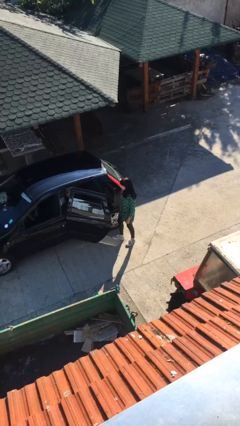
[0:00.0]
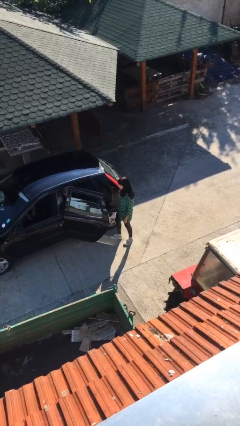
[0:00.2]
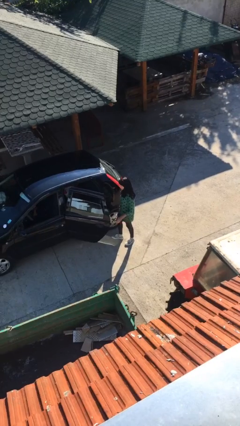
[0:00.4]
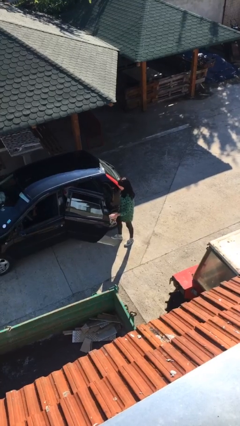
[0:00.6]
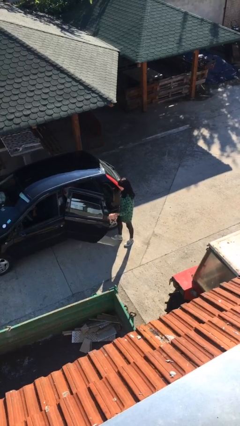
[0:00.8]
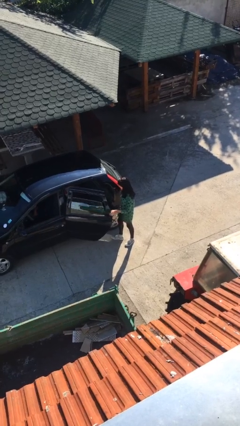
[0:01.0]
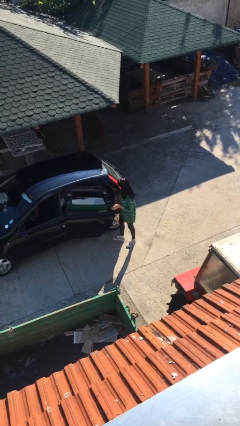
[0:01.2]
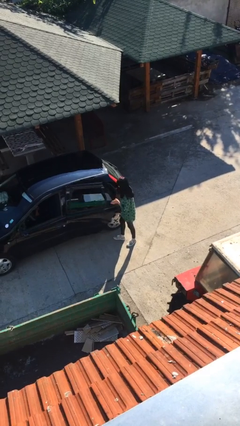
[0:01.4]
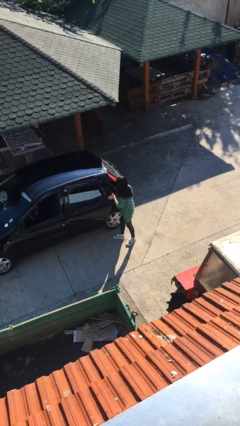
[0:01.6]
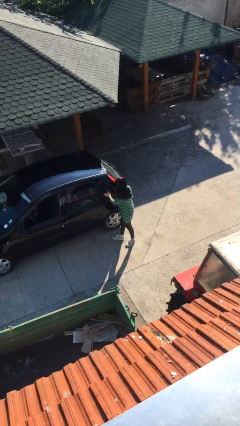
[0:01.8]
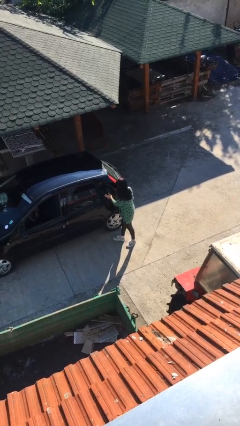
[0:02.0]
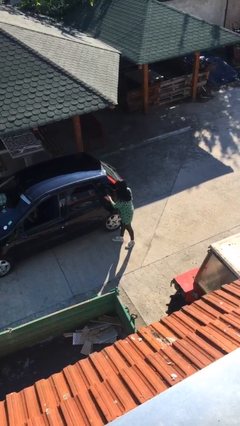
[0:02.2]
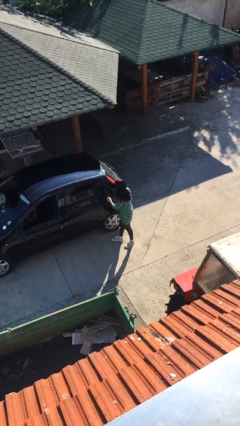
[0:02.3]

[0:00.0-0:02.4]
person closes car door

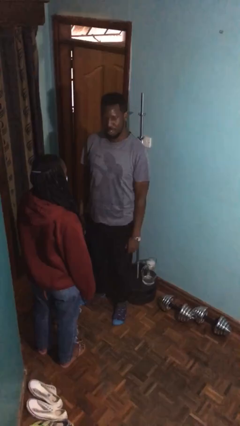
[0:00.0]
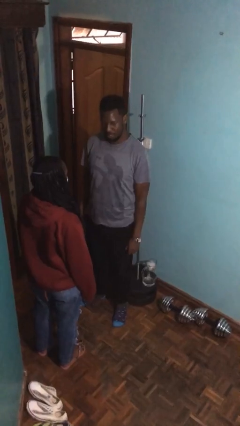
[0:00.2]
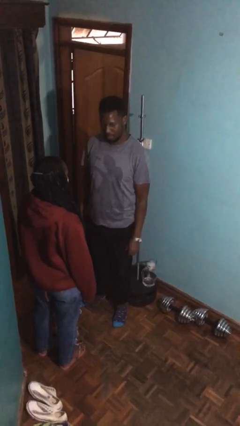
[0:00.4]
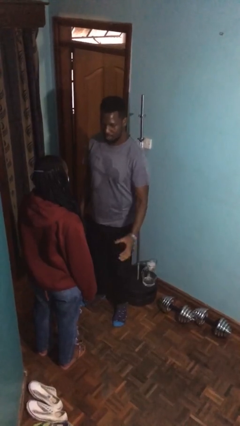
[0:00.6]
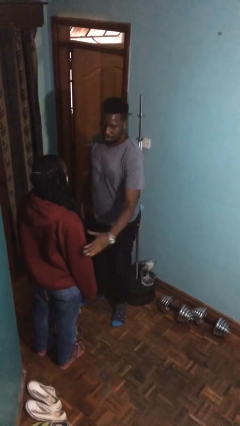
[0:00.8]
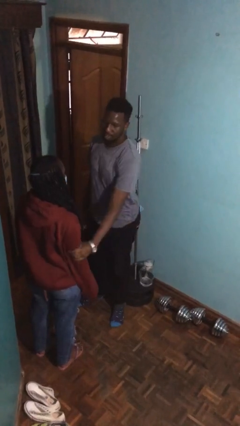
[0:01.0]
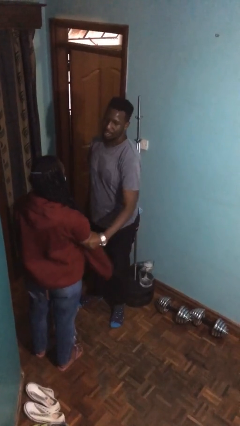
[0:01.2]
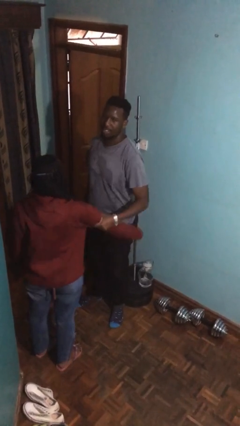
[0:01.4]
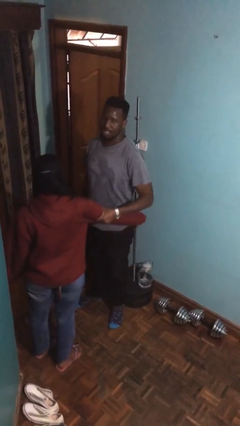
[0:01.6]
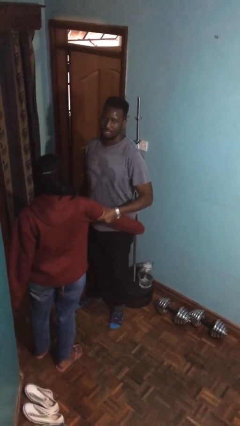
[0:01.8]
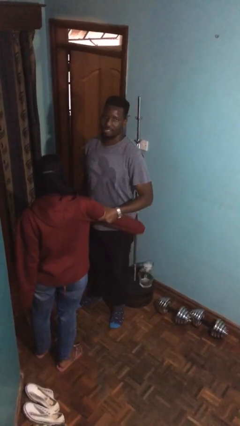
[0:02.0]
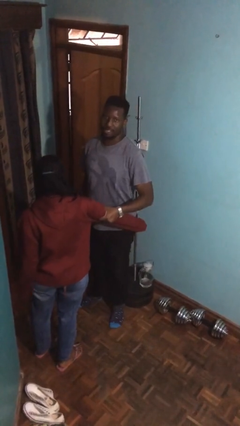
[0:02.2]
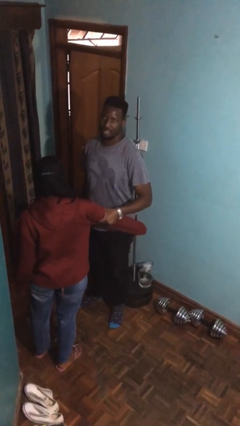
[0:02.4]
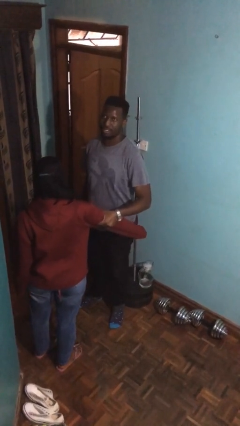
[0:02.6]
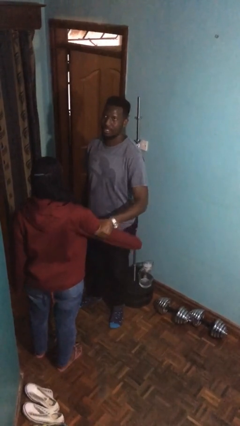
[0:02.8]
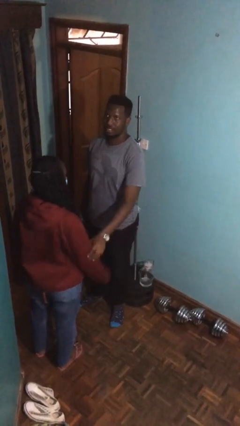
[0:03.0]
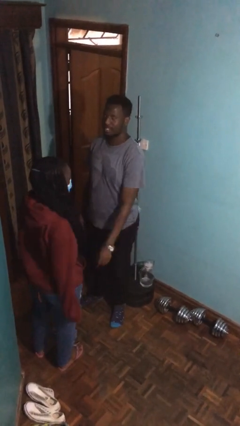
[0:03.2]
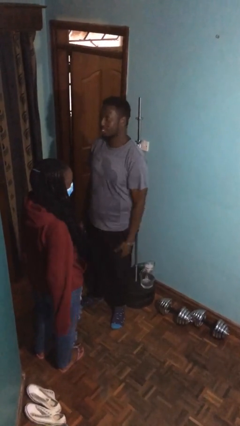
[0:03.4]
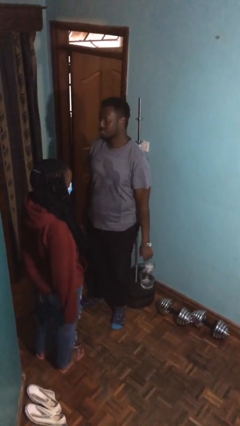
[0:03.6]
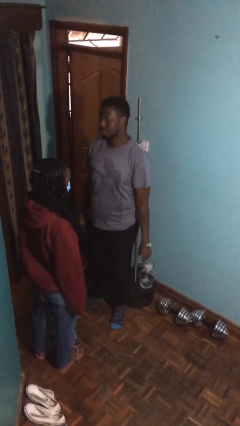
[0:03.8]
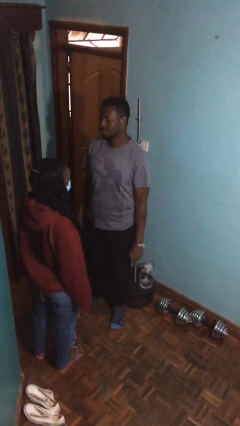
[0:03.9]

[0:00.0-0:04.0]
person grabs person by bicep

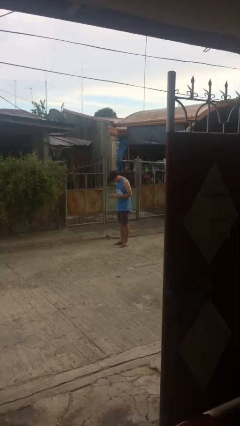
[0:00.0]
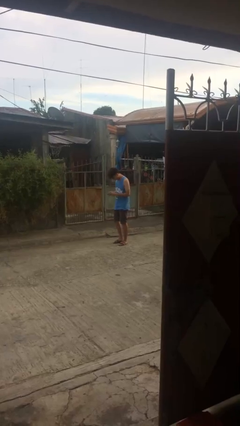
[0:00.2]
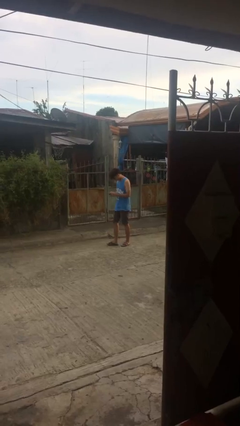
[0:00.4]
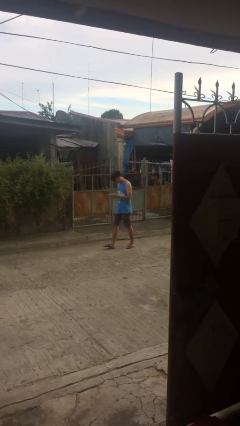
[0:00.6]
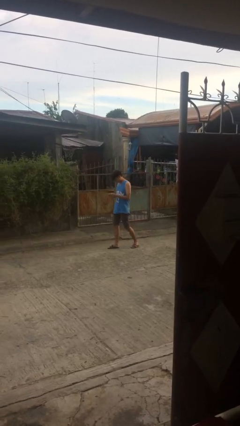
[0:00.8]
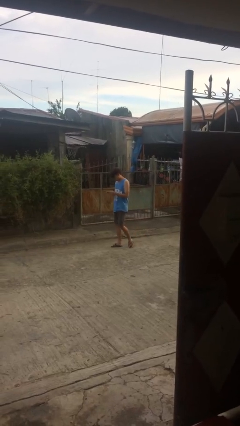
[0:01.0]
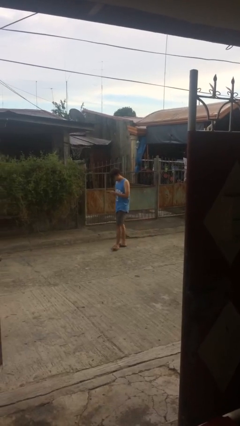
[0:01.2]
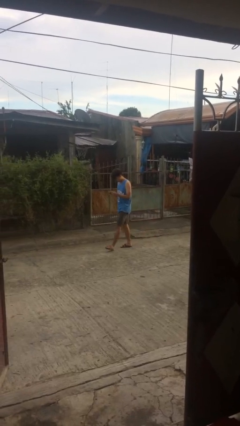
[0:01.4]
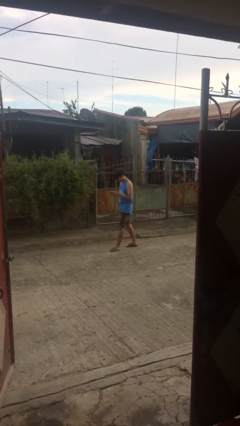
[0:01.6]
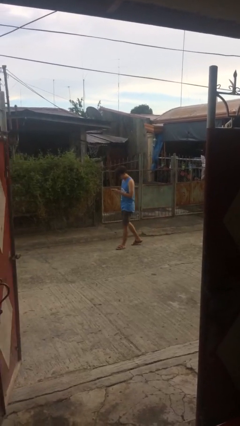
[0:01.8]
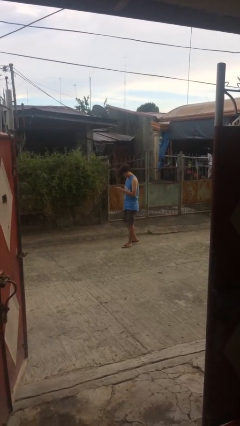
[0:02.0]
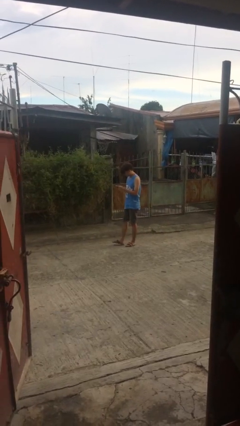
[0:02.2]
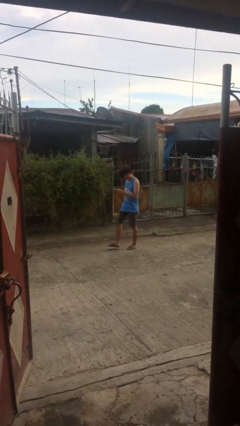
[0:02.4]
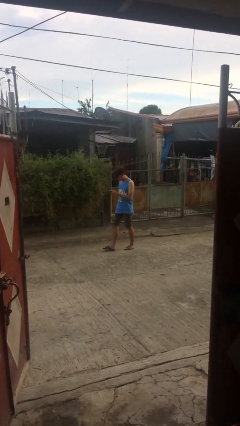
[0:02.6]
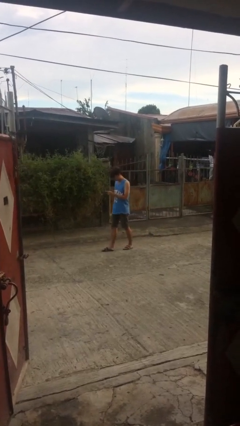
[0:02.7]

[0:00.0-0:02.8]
person texts on phone

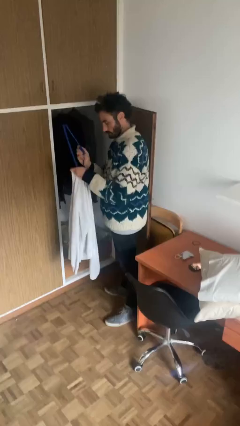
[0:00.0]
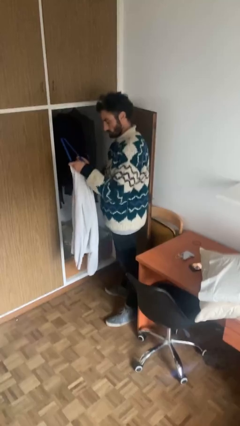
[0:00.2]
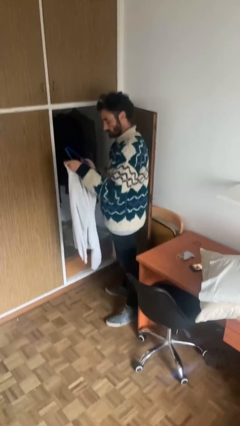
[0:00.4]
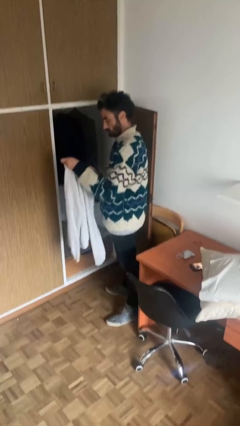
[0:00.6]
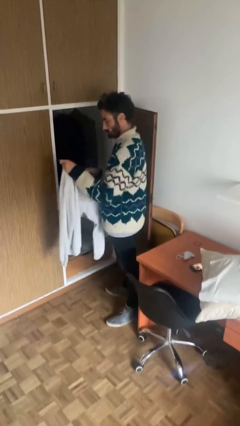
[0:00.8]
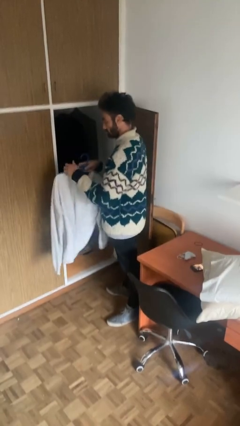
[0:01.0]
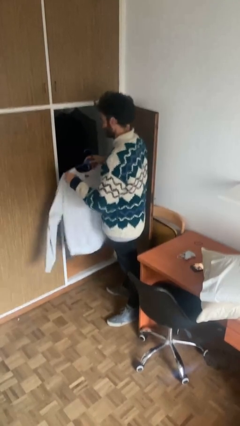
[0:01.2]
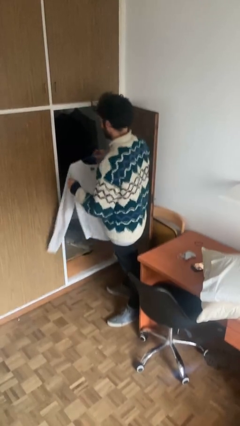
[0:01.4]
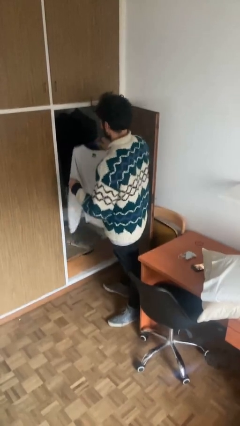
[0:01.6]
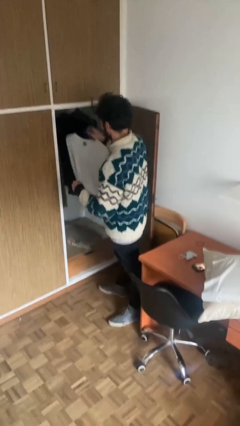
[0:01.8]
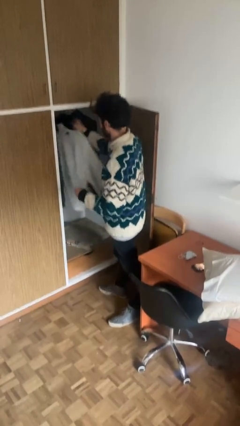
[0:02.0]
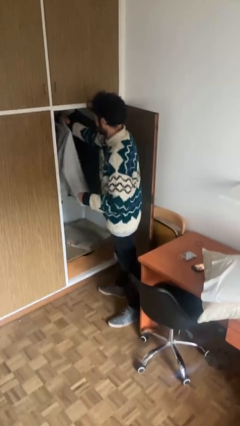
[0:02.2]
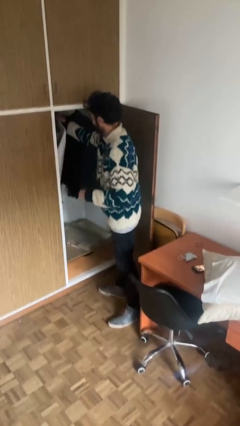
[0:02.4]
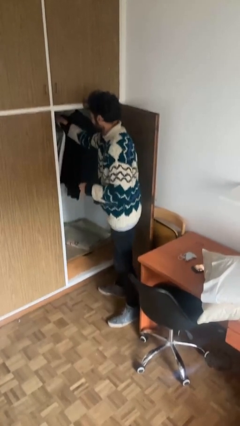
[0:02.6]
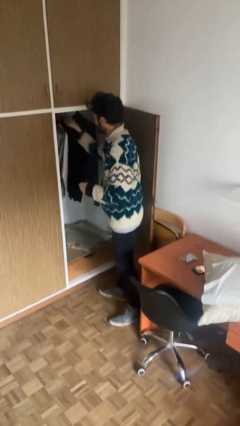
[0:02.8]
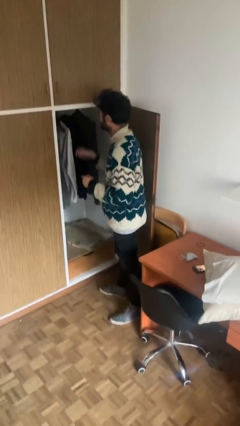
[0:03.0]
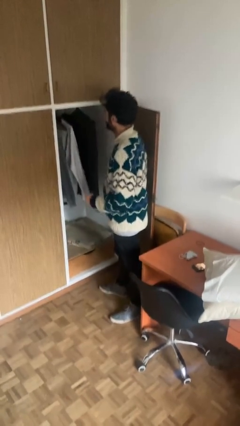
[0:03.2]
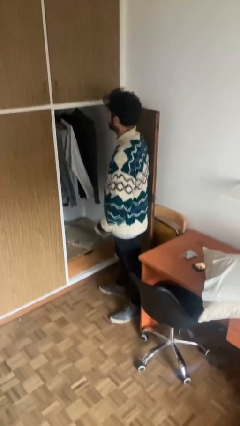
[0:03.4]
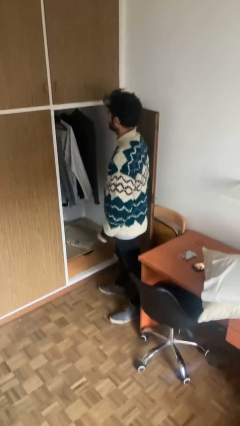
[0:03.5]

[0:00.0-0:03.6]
person puts clothes into closet

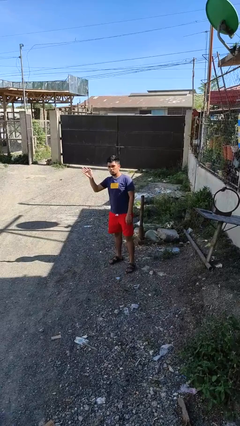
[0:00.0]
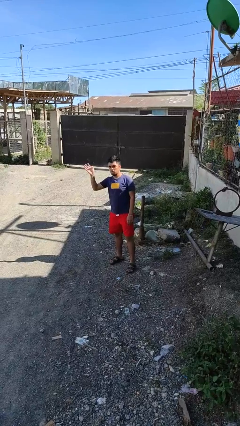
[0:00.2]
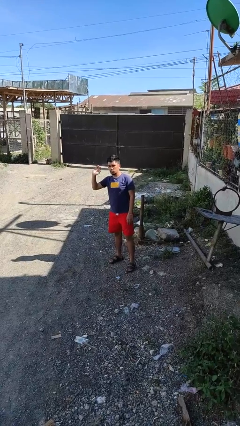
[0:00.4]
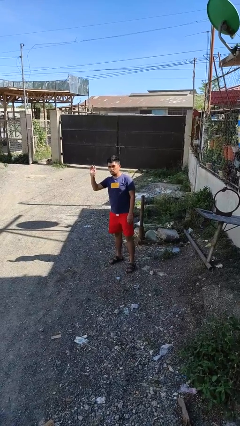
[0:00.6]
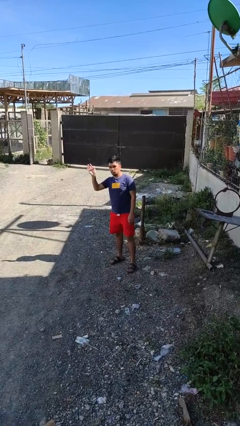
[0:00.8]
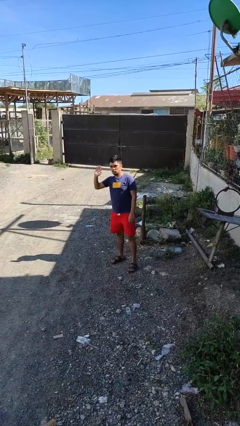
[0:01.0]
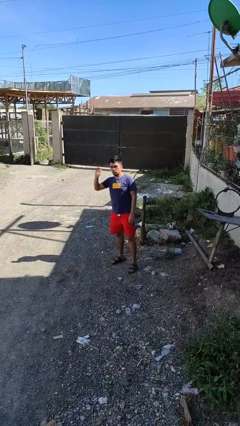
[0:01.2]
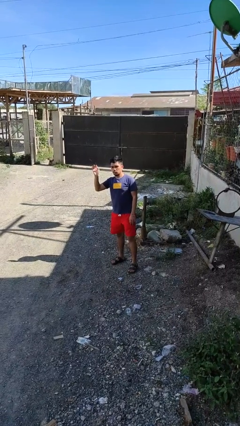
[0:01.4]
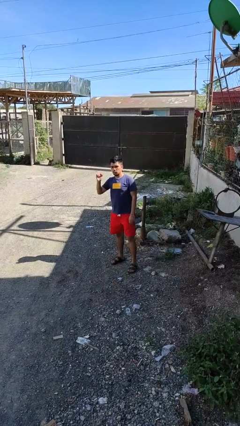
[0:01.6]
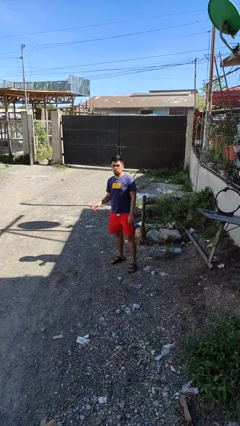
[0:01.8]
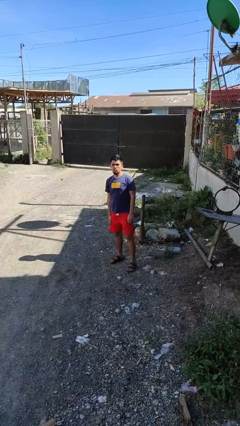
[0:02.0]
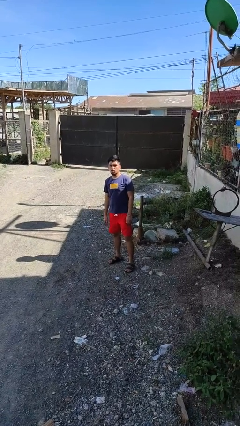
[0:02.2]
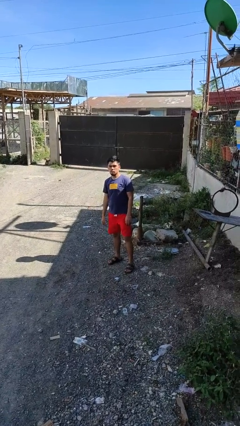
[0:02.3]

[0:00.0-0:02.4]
person waves at person

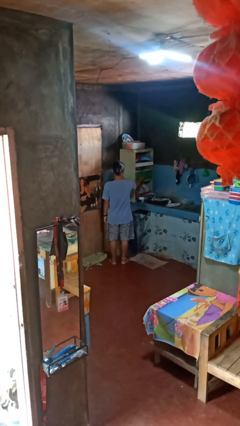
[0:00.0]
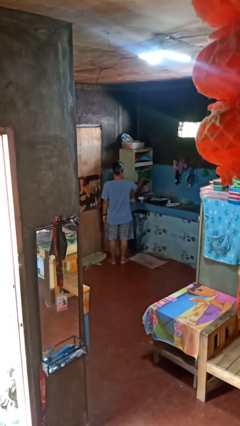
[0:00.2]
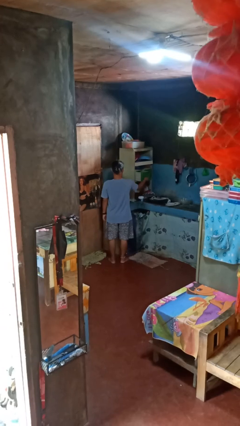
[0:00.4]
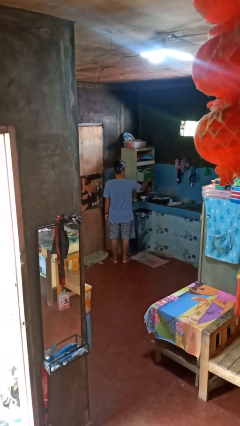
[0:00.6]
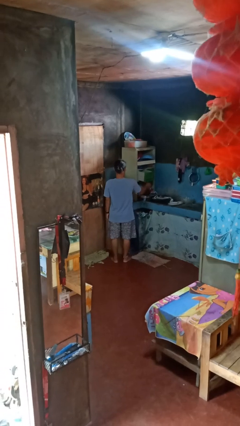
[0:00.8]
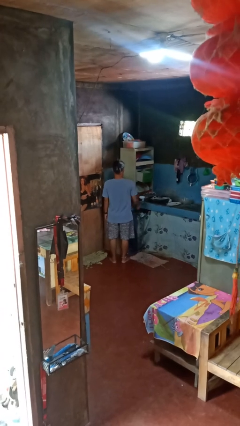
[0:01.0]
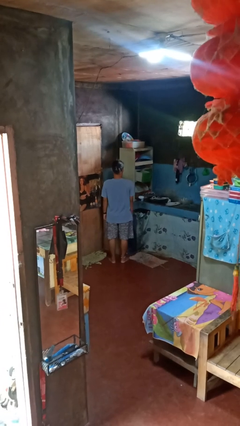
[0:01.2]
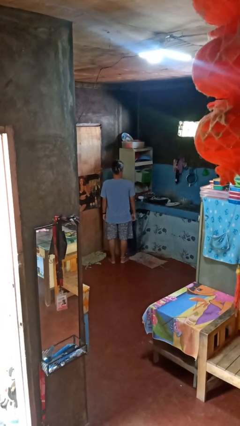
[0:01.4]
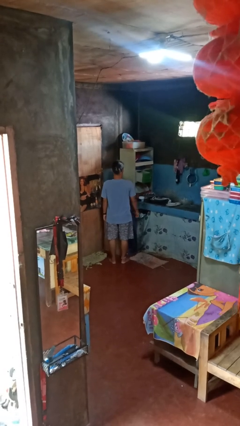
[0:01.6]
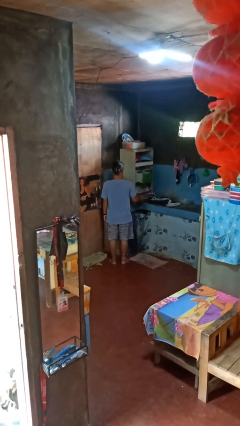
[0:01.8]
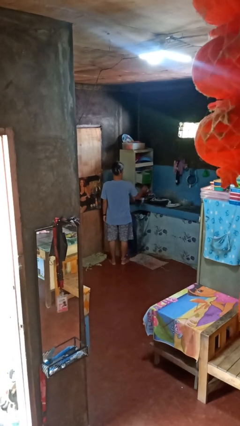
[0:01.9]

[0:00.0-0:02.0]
person opens kitchen drawer

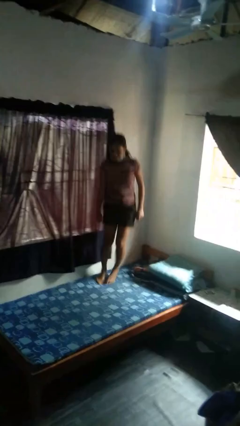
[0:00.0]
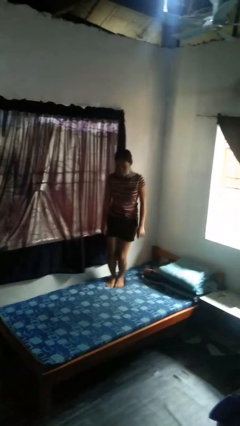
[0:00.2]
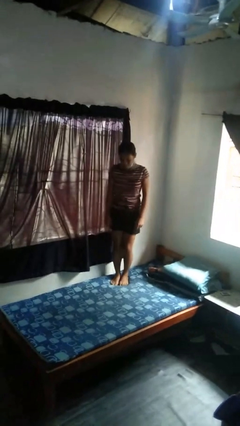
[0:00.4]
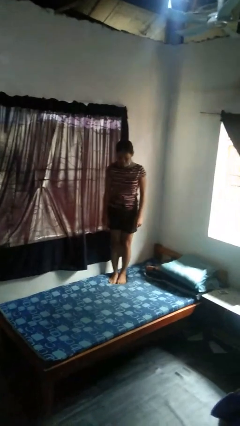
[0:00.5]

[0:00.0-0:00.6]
person jumps on bed
